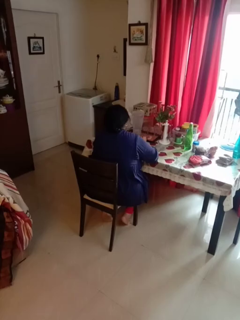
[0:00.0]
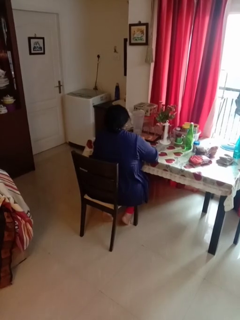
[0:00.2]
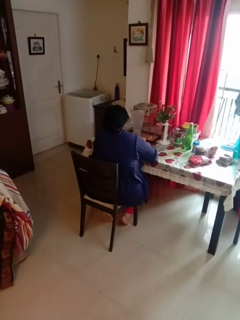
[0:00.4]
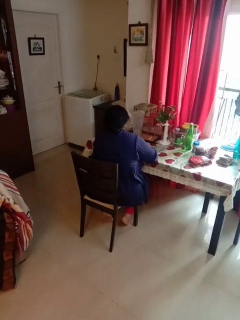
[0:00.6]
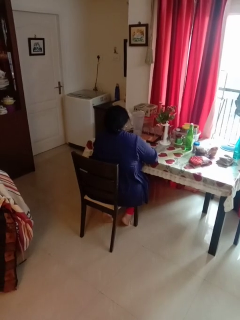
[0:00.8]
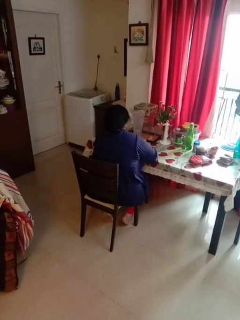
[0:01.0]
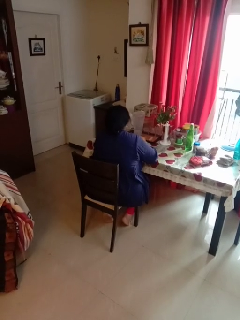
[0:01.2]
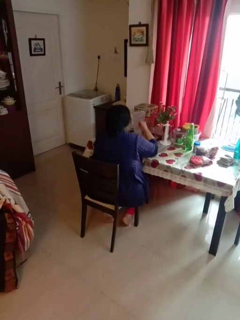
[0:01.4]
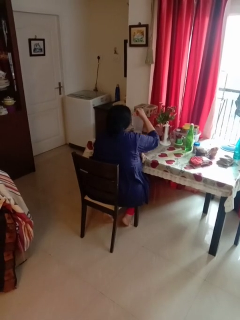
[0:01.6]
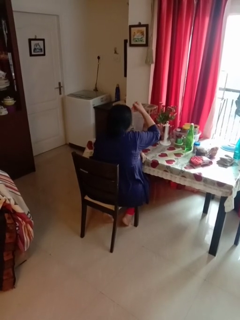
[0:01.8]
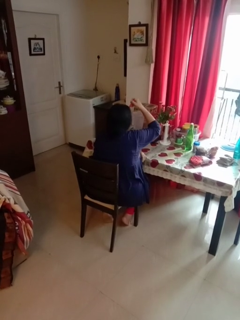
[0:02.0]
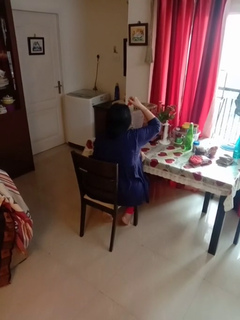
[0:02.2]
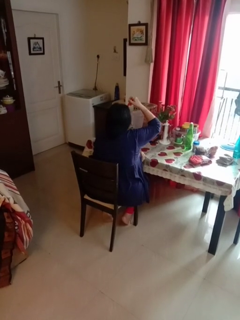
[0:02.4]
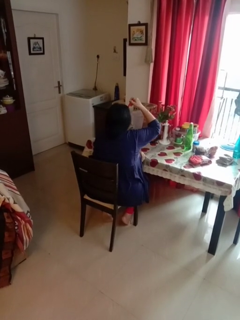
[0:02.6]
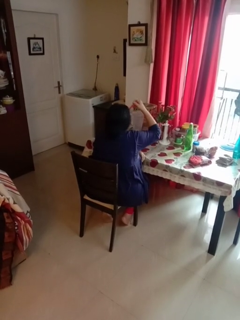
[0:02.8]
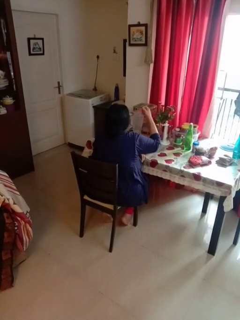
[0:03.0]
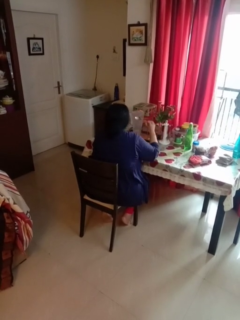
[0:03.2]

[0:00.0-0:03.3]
person eats with utensil

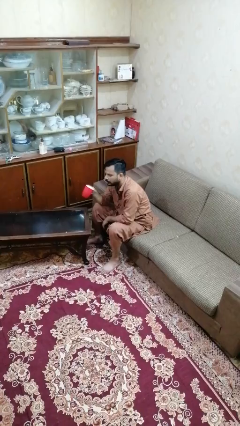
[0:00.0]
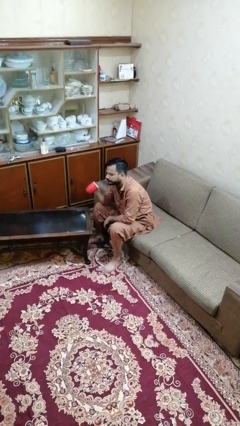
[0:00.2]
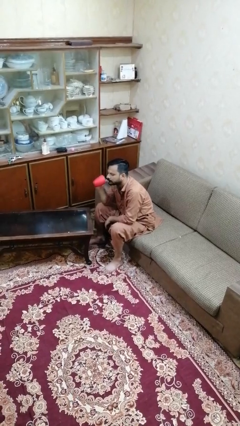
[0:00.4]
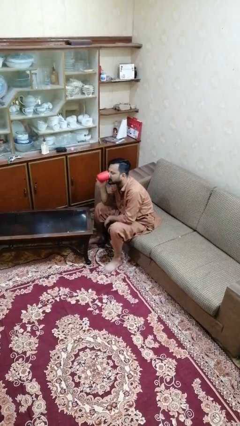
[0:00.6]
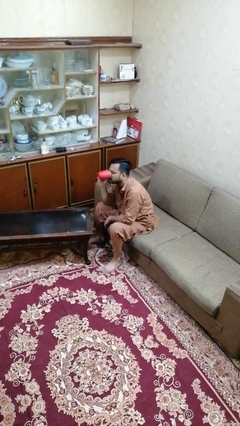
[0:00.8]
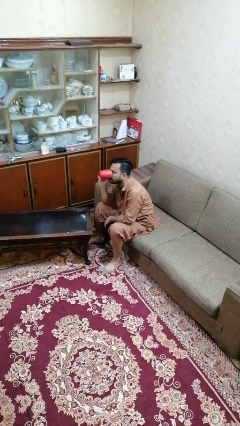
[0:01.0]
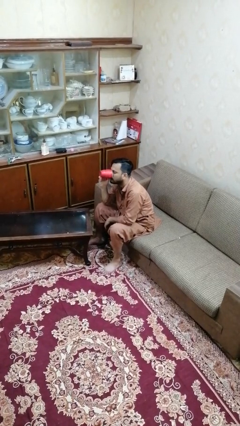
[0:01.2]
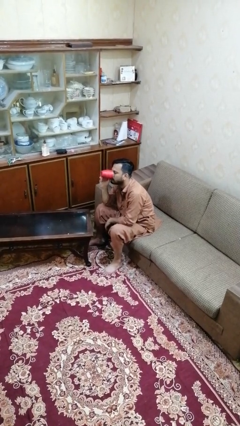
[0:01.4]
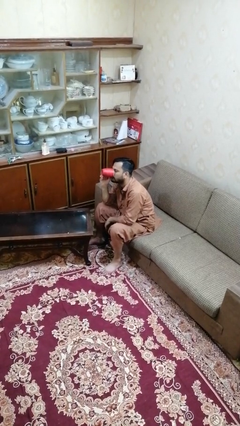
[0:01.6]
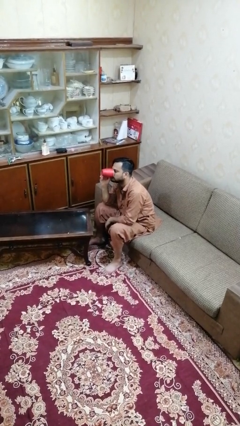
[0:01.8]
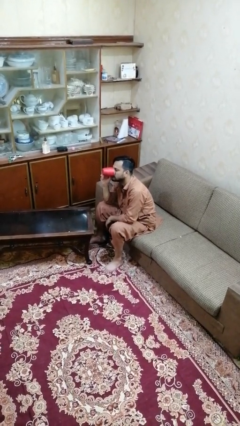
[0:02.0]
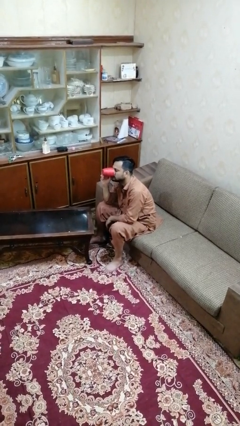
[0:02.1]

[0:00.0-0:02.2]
person drinks from mug

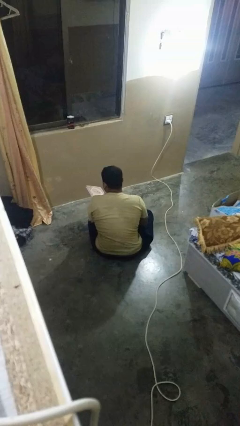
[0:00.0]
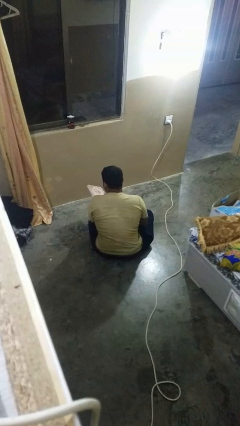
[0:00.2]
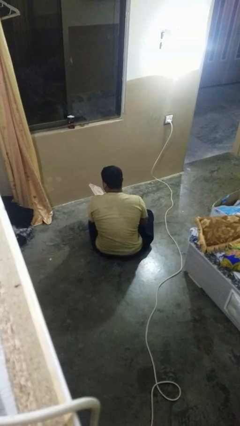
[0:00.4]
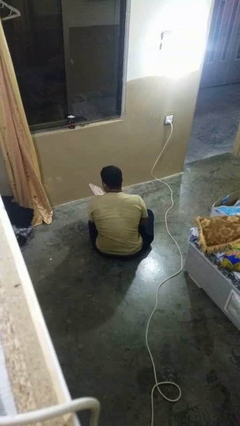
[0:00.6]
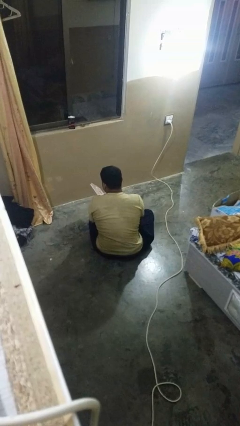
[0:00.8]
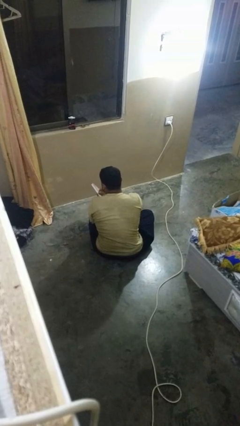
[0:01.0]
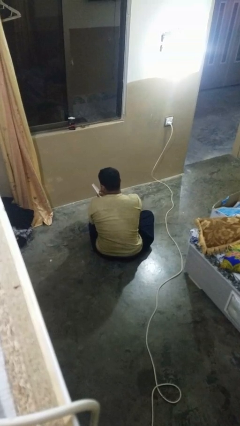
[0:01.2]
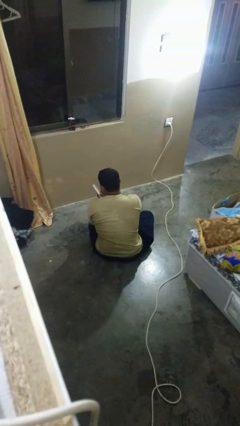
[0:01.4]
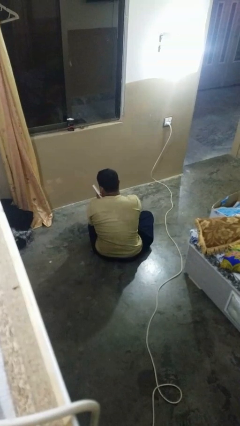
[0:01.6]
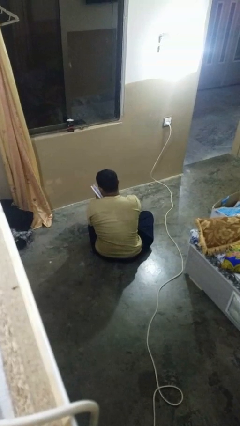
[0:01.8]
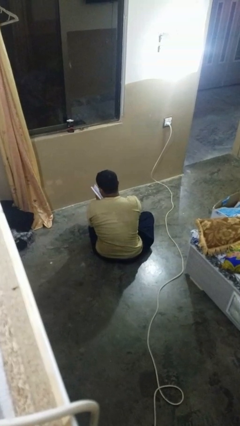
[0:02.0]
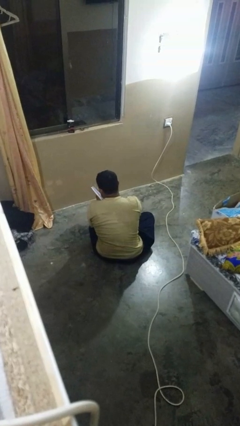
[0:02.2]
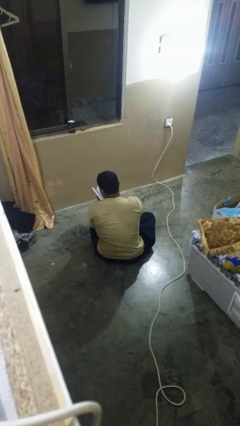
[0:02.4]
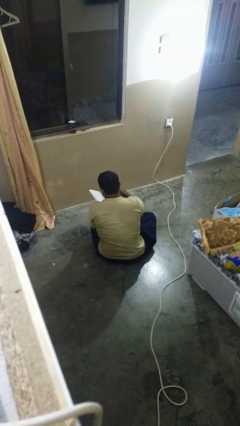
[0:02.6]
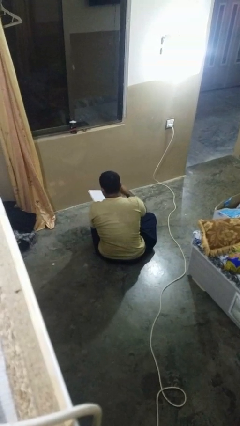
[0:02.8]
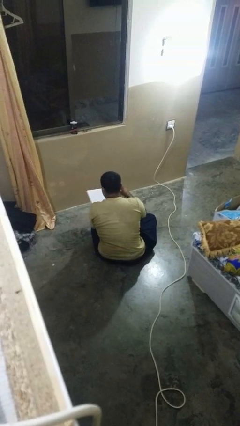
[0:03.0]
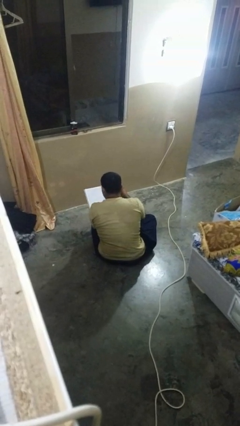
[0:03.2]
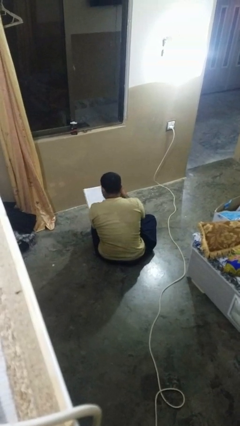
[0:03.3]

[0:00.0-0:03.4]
person reads book

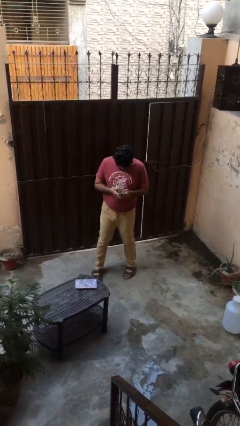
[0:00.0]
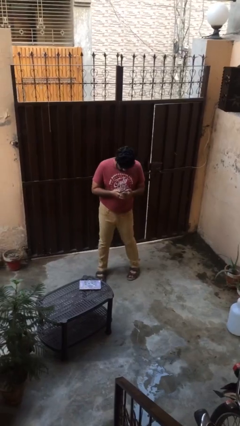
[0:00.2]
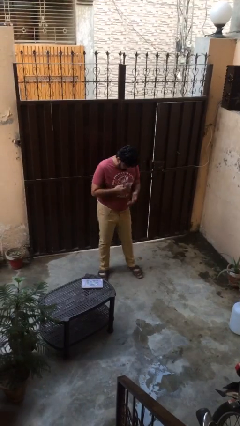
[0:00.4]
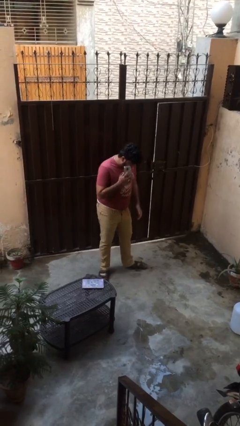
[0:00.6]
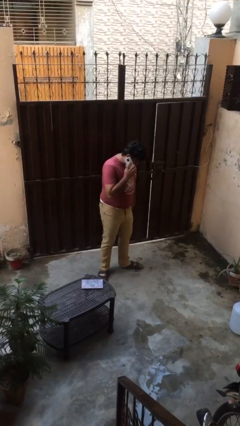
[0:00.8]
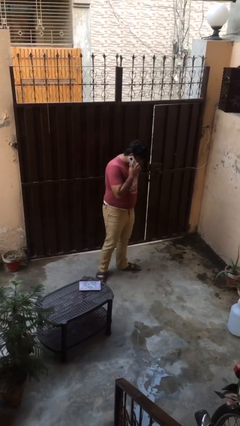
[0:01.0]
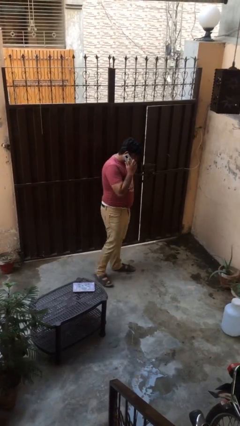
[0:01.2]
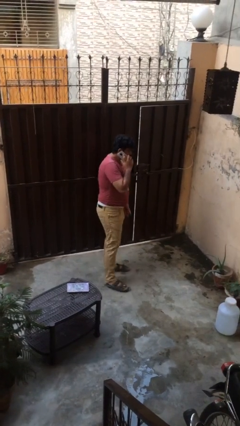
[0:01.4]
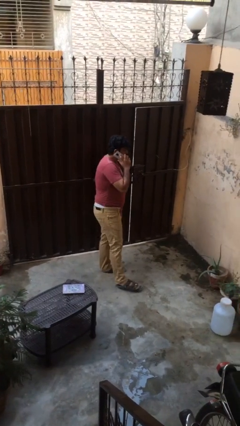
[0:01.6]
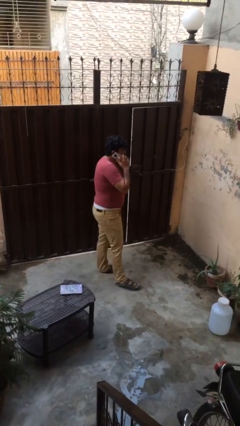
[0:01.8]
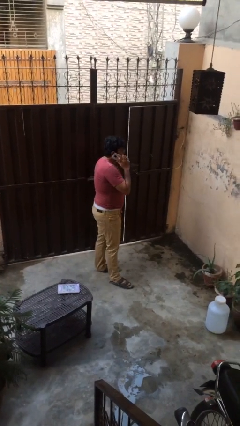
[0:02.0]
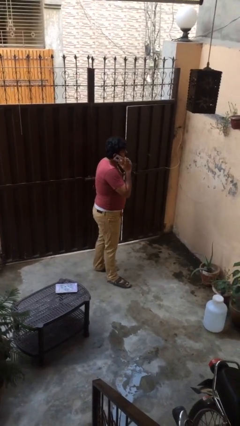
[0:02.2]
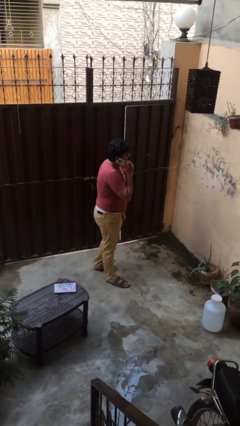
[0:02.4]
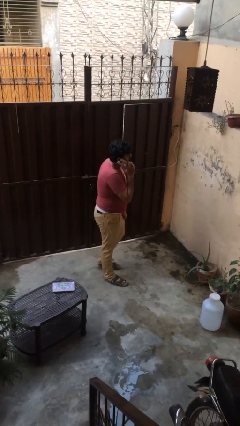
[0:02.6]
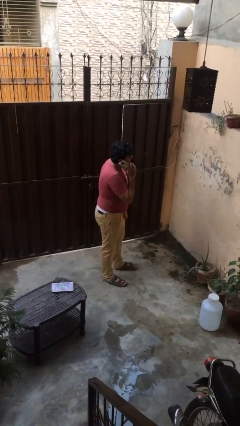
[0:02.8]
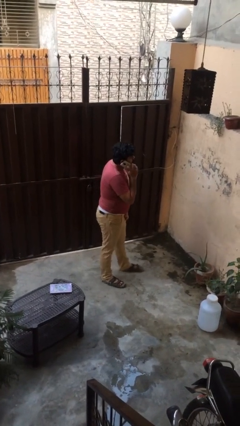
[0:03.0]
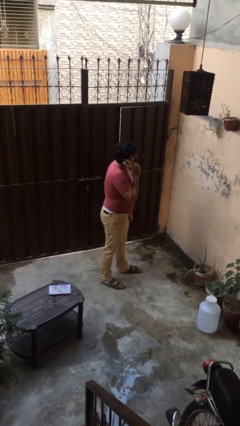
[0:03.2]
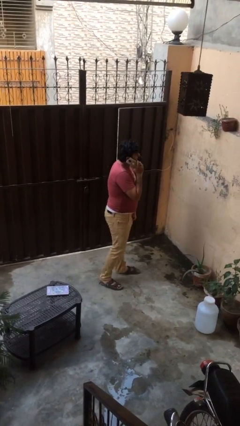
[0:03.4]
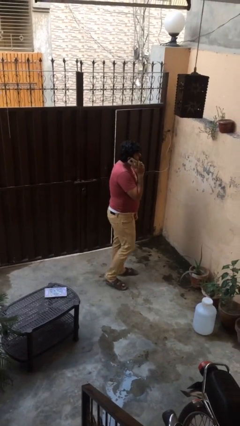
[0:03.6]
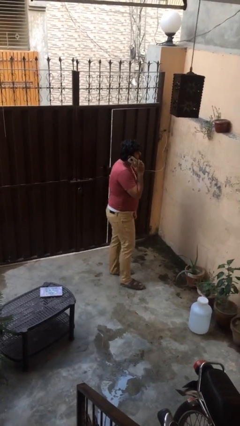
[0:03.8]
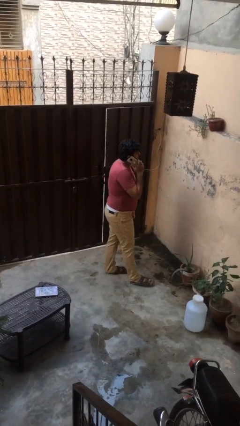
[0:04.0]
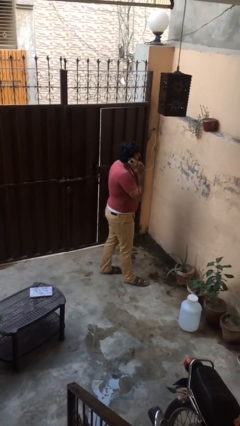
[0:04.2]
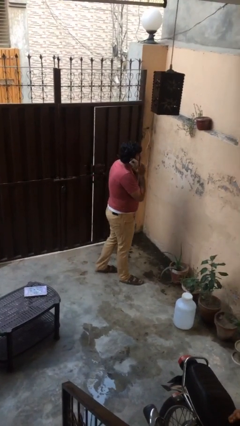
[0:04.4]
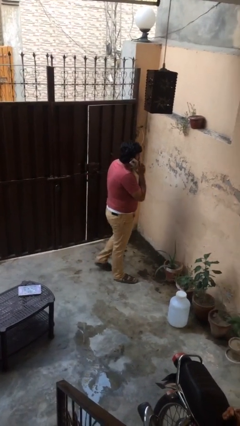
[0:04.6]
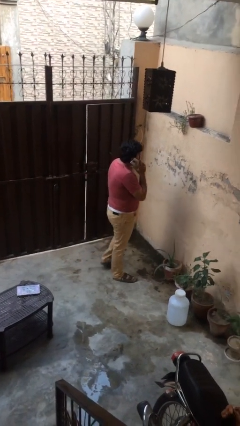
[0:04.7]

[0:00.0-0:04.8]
person talks on phone

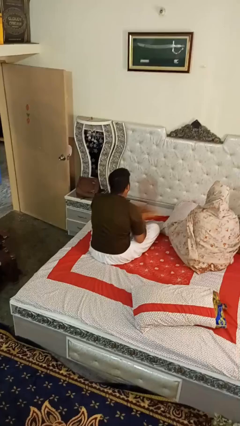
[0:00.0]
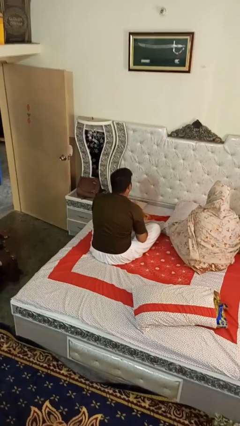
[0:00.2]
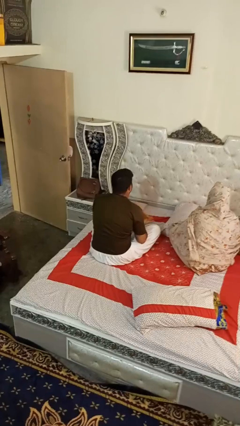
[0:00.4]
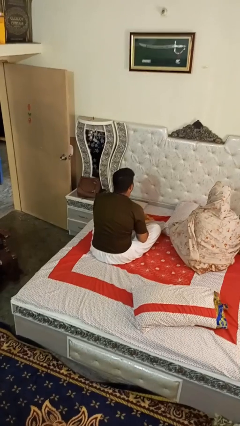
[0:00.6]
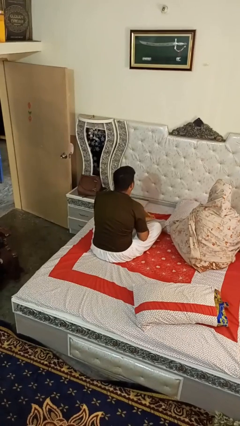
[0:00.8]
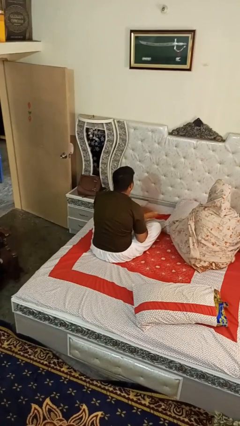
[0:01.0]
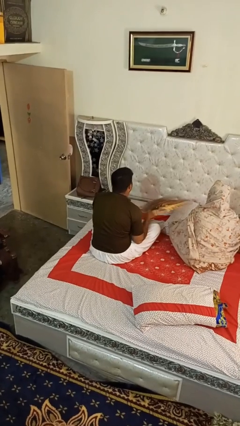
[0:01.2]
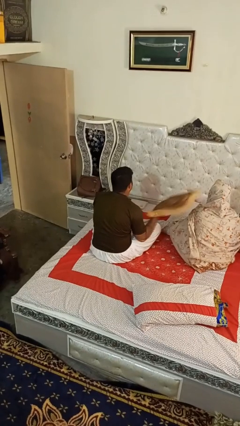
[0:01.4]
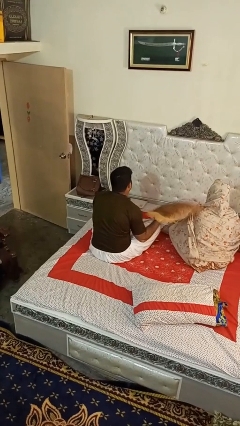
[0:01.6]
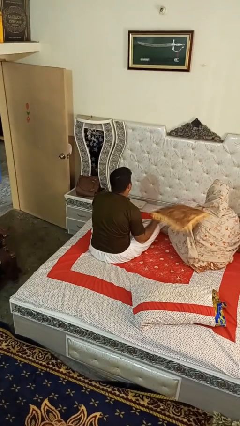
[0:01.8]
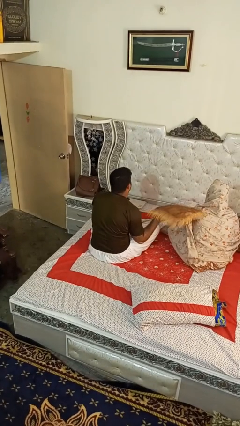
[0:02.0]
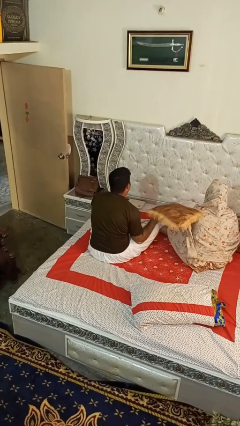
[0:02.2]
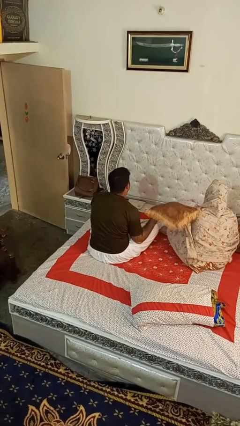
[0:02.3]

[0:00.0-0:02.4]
person hits person with pillow

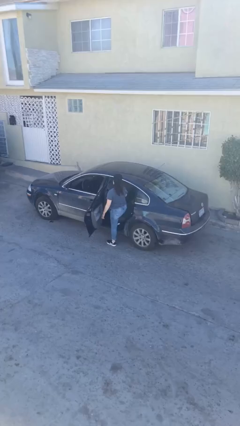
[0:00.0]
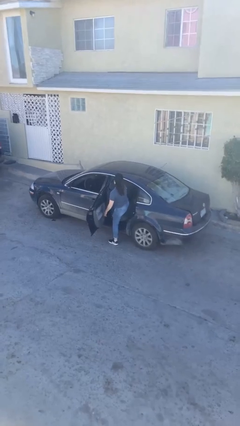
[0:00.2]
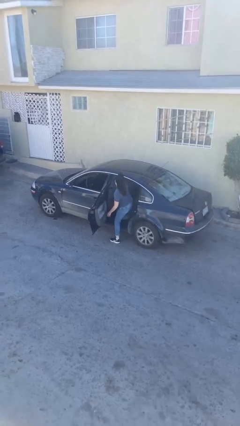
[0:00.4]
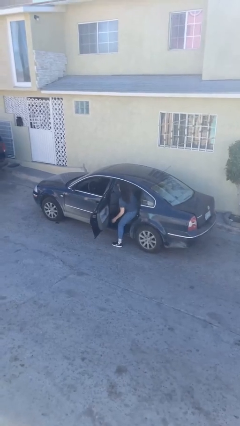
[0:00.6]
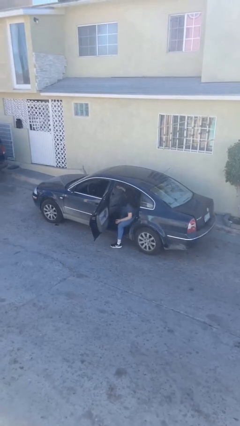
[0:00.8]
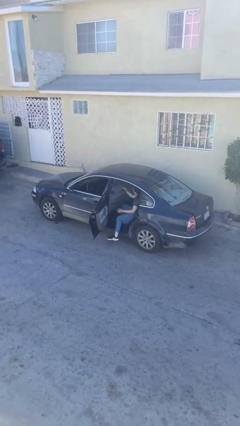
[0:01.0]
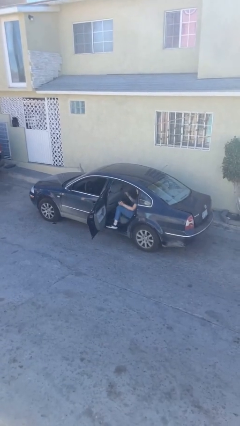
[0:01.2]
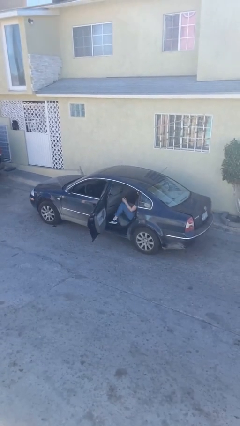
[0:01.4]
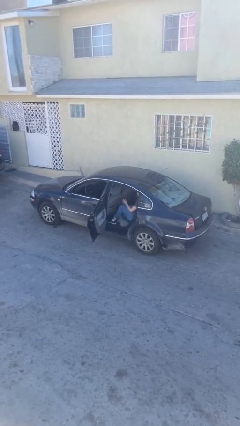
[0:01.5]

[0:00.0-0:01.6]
person enters car

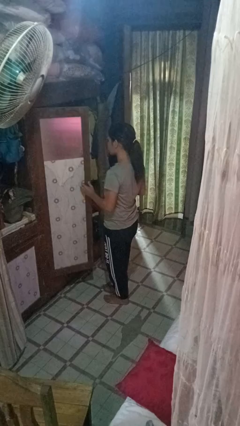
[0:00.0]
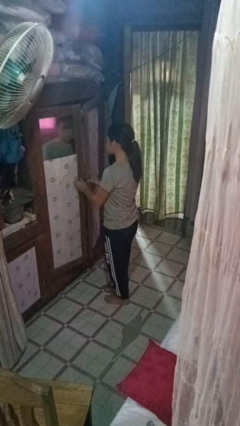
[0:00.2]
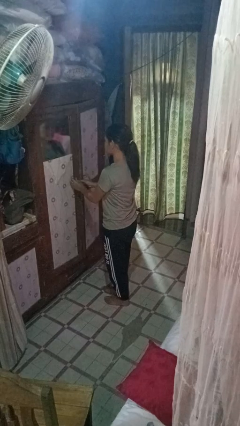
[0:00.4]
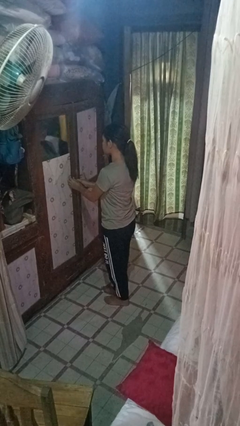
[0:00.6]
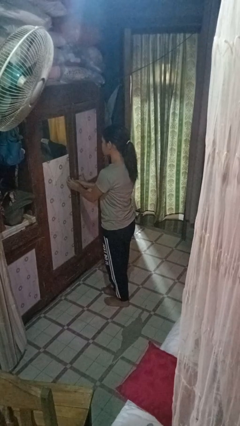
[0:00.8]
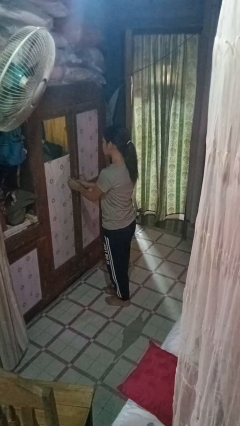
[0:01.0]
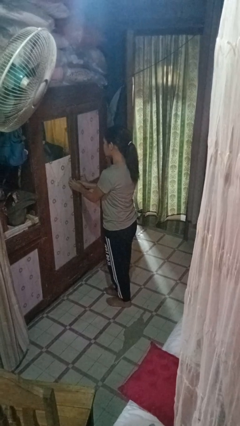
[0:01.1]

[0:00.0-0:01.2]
person closes closet door
